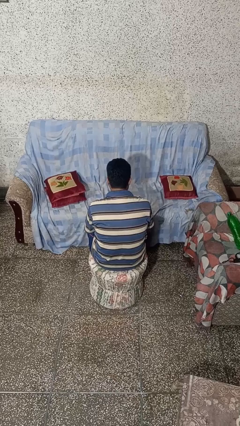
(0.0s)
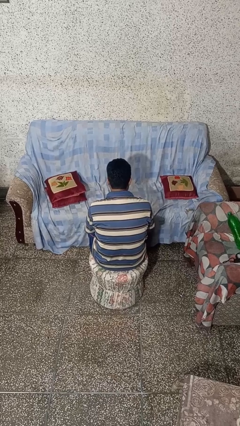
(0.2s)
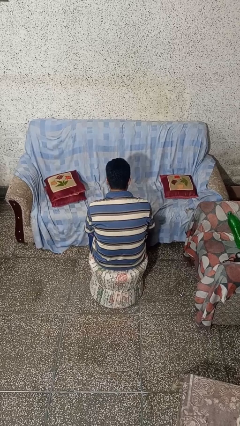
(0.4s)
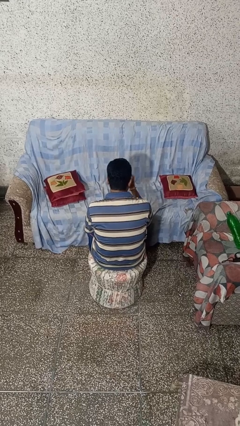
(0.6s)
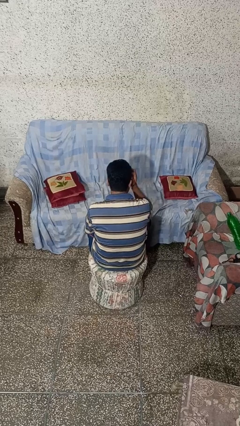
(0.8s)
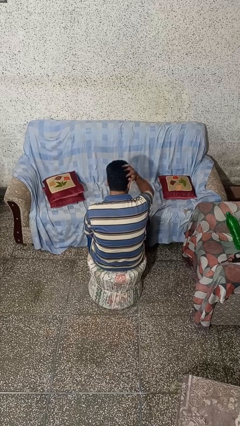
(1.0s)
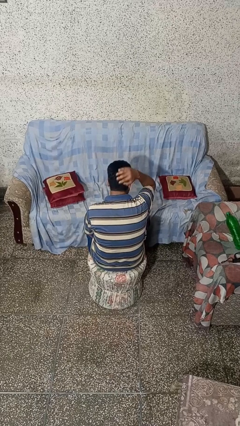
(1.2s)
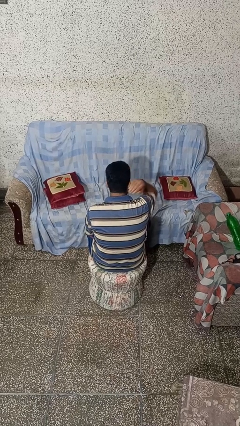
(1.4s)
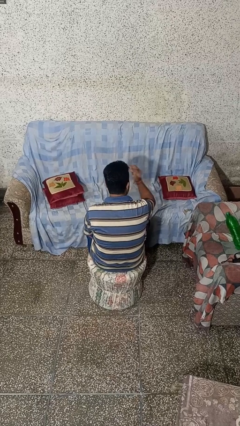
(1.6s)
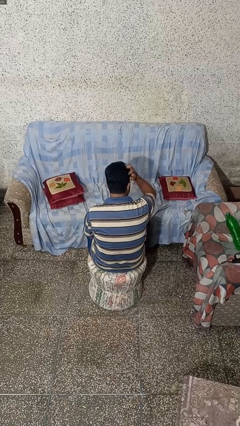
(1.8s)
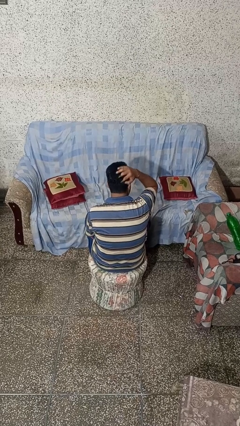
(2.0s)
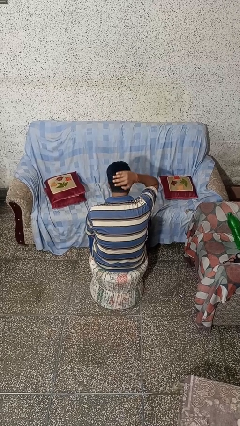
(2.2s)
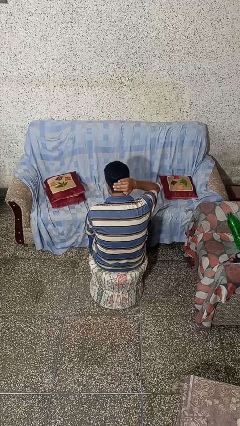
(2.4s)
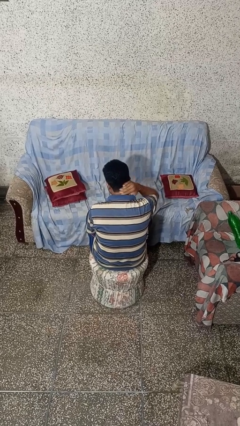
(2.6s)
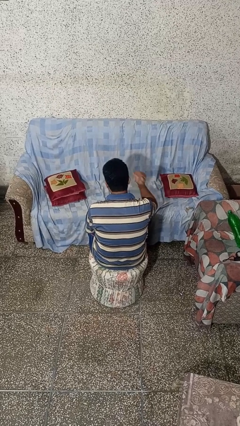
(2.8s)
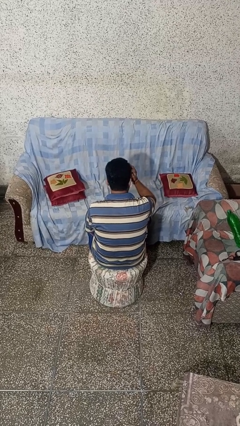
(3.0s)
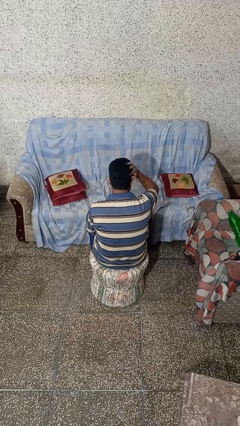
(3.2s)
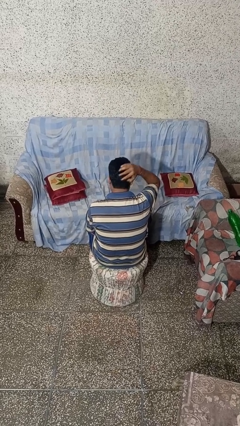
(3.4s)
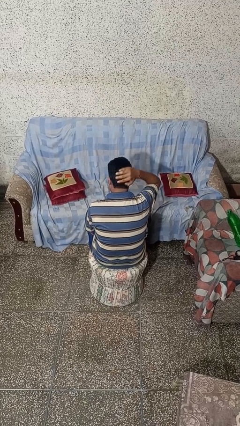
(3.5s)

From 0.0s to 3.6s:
person strokes hair

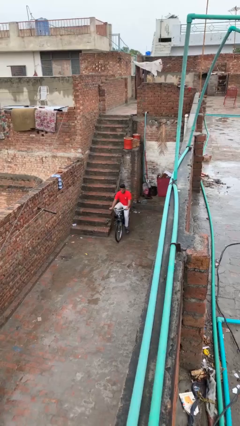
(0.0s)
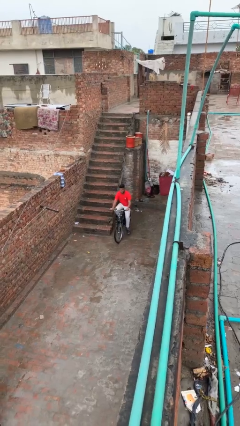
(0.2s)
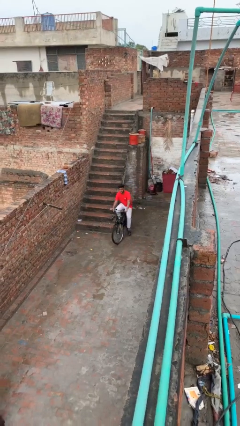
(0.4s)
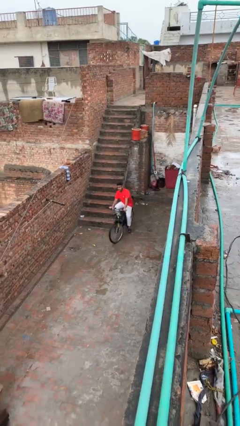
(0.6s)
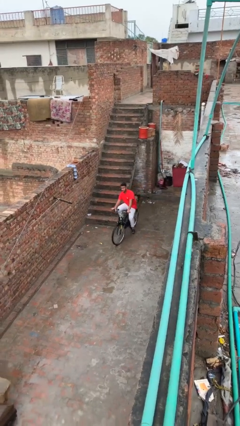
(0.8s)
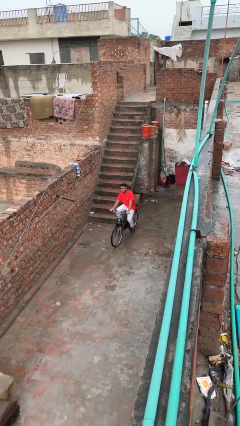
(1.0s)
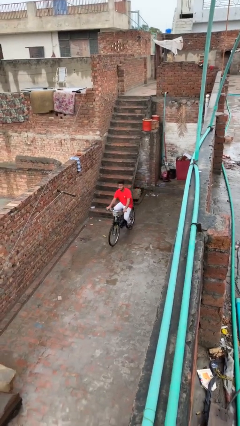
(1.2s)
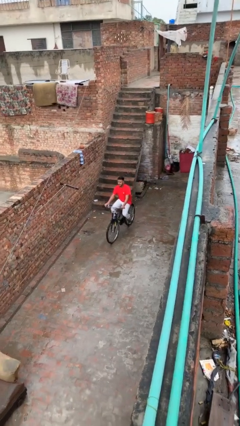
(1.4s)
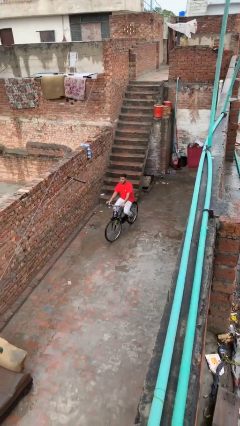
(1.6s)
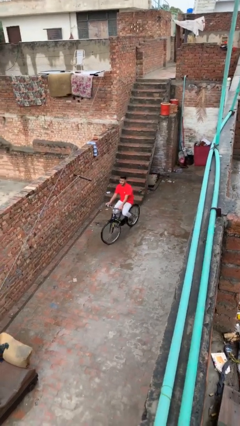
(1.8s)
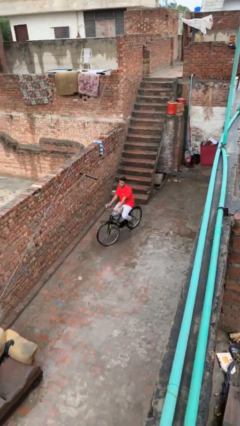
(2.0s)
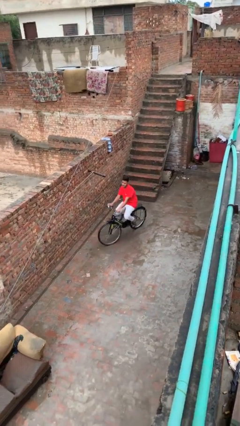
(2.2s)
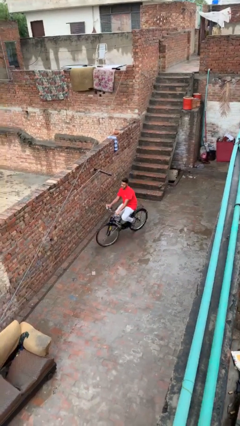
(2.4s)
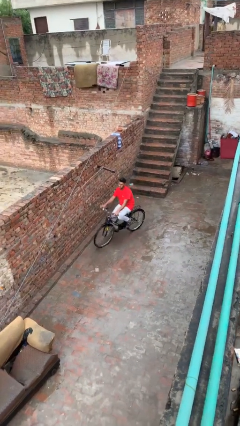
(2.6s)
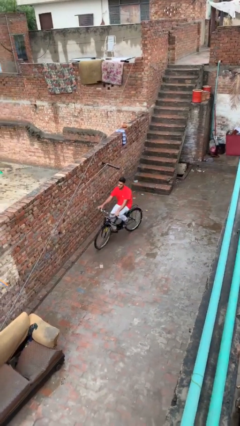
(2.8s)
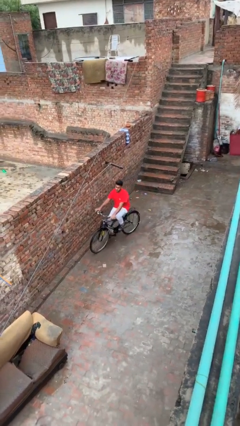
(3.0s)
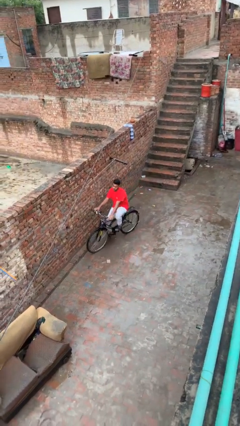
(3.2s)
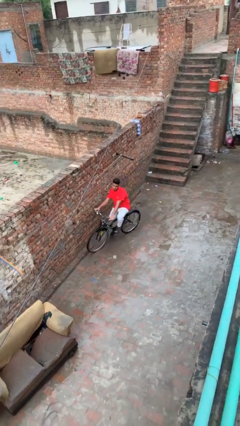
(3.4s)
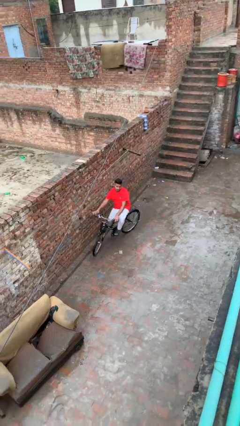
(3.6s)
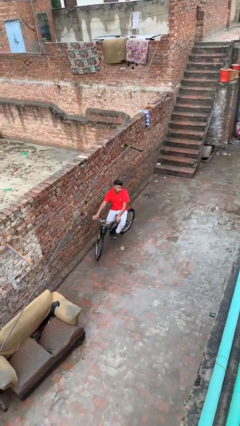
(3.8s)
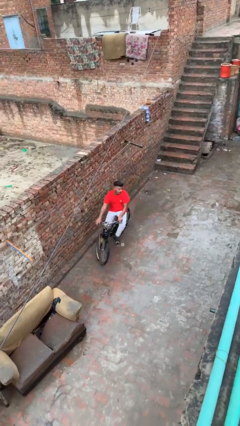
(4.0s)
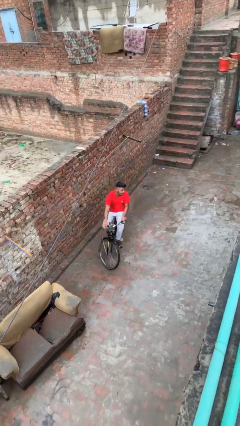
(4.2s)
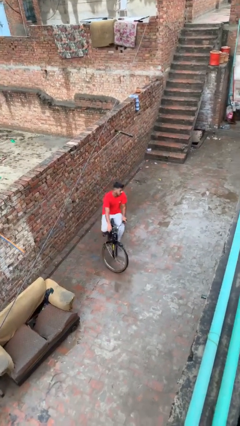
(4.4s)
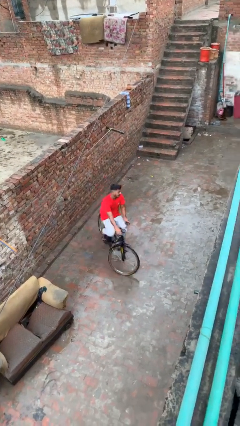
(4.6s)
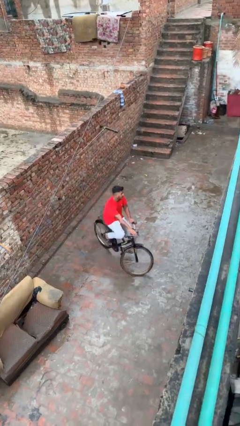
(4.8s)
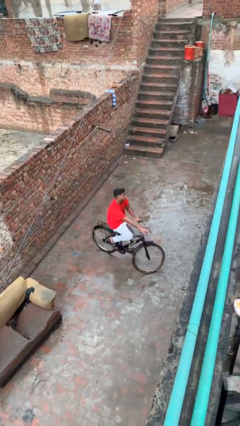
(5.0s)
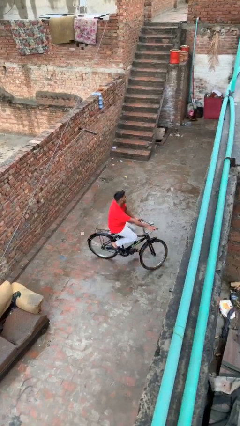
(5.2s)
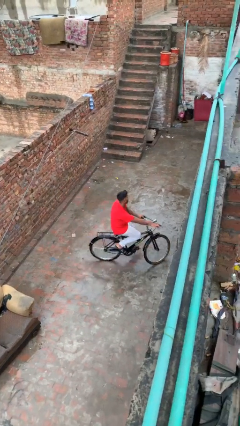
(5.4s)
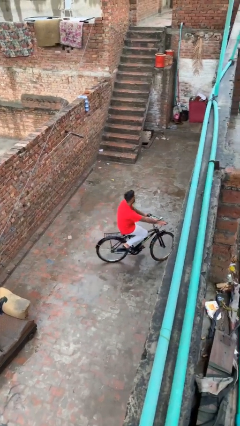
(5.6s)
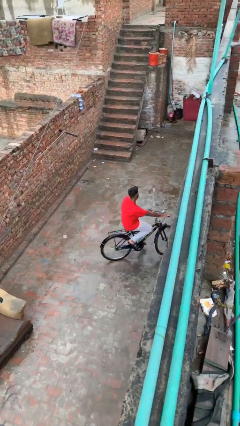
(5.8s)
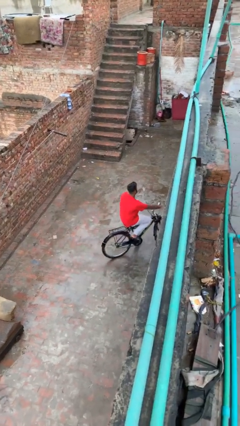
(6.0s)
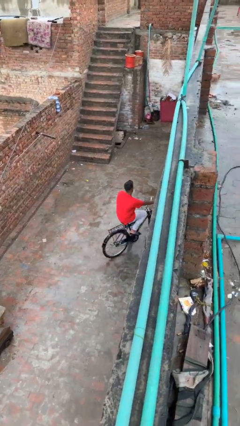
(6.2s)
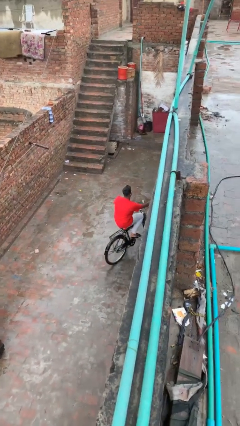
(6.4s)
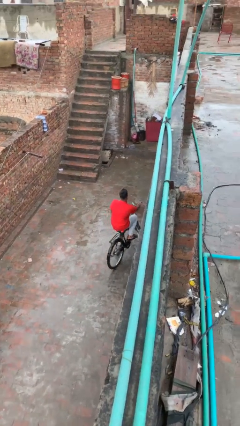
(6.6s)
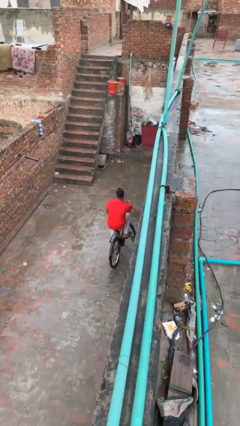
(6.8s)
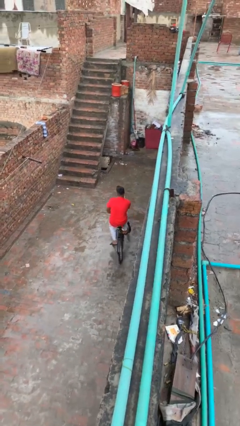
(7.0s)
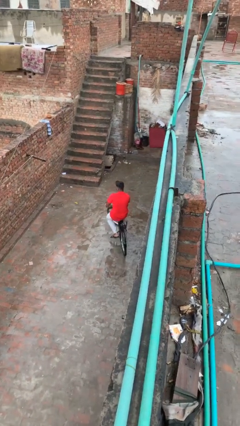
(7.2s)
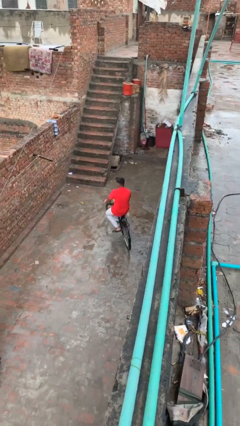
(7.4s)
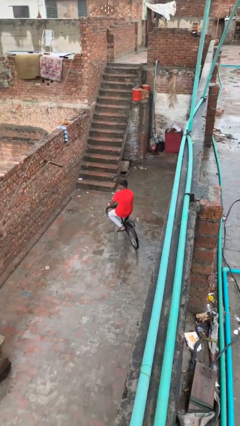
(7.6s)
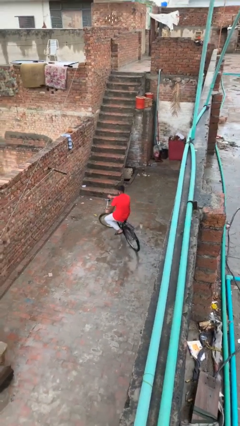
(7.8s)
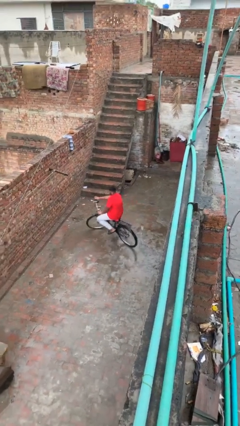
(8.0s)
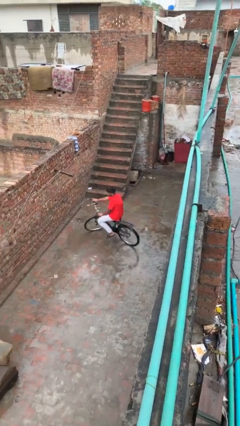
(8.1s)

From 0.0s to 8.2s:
person rides bicycle

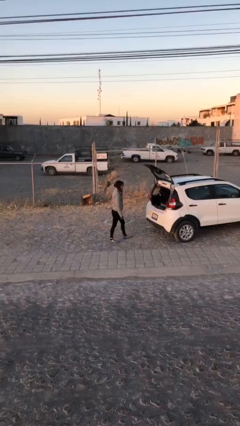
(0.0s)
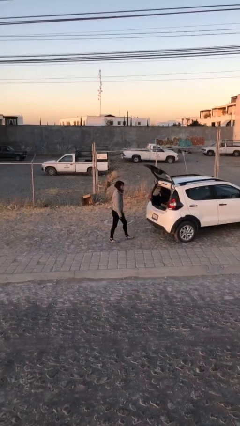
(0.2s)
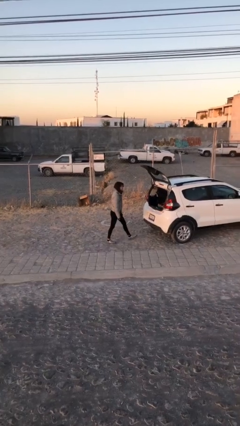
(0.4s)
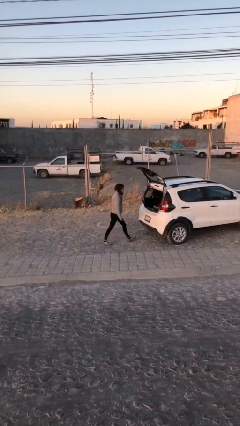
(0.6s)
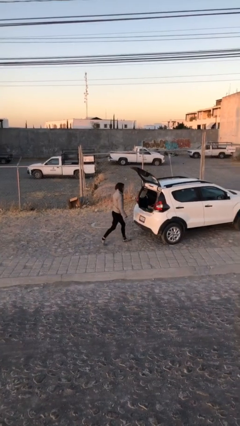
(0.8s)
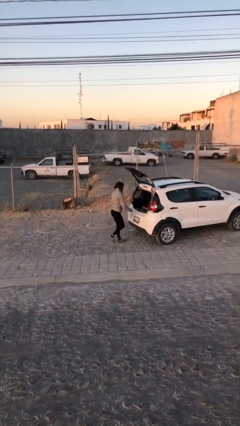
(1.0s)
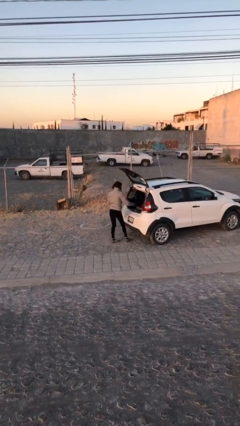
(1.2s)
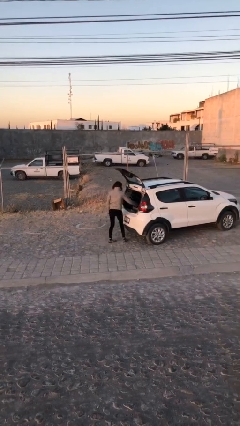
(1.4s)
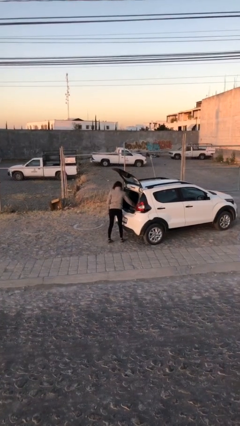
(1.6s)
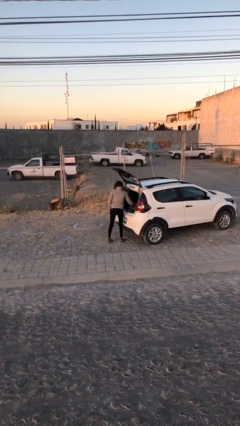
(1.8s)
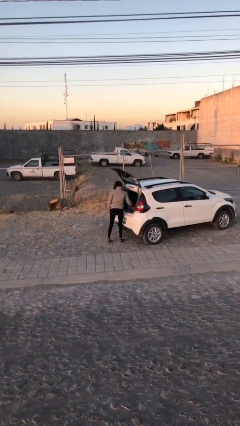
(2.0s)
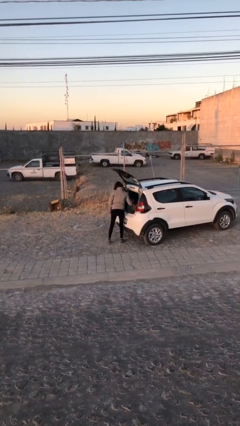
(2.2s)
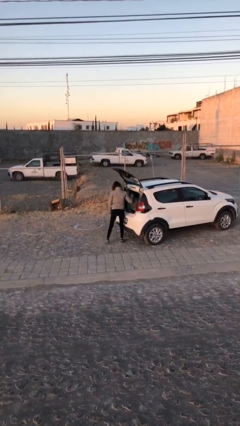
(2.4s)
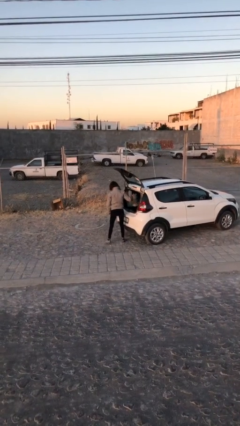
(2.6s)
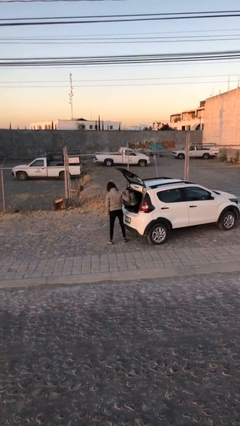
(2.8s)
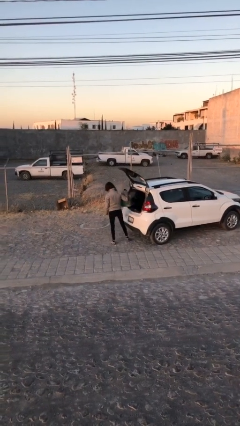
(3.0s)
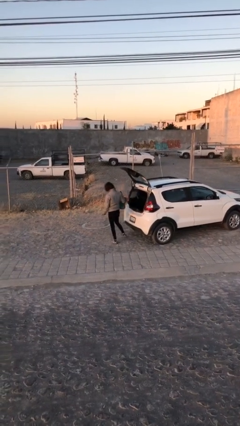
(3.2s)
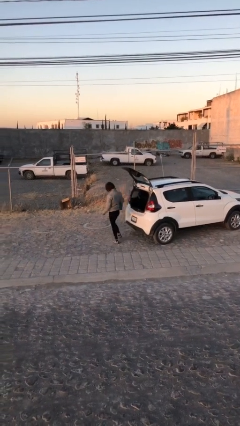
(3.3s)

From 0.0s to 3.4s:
person unloads car

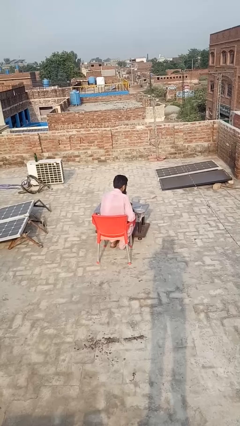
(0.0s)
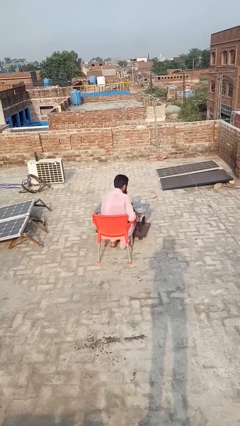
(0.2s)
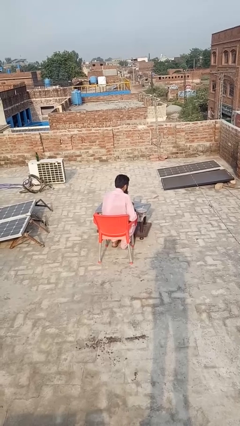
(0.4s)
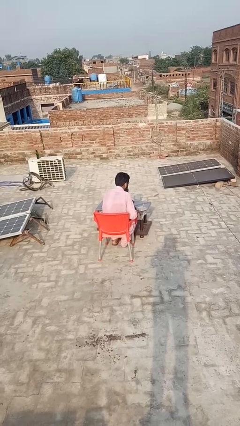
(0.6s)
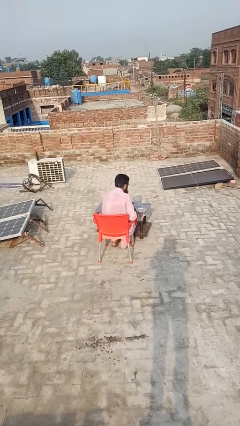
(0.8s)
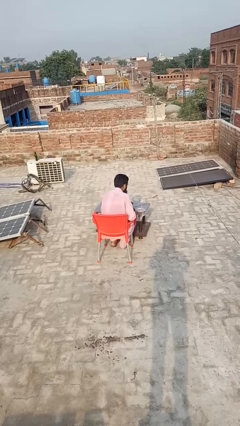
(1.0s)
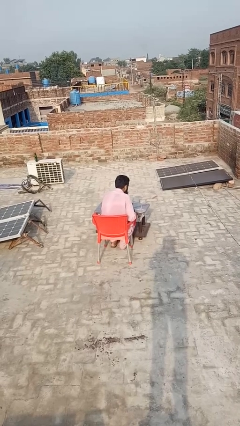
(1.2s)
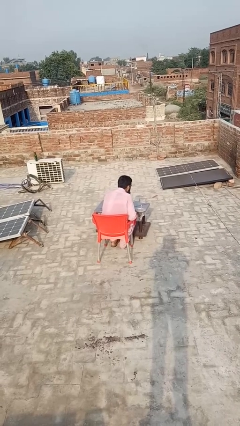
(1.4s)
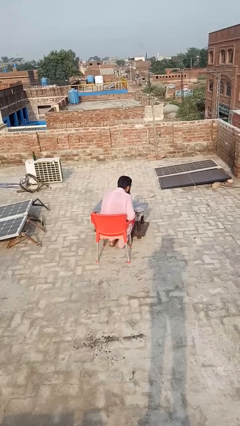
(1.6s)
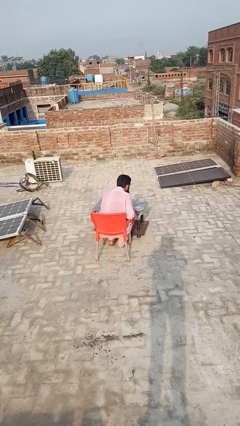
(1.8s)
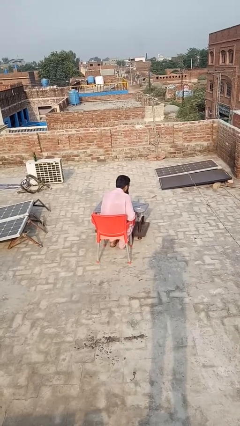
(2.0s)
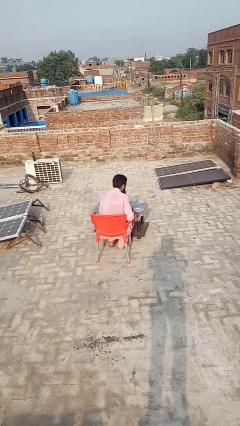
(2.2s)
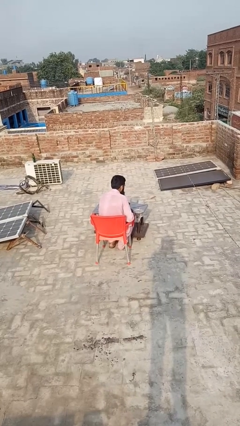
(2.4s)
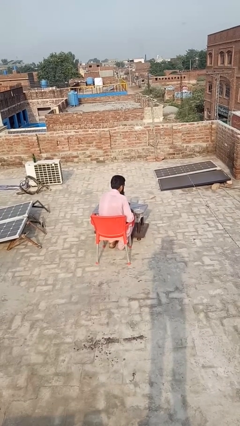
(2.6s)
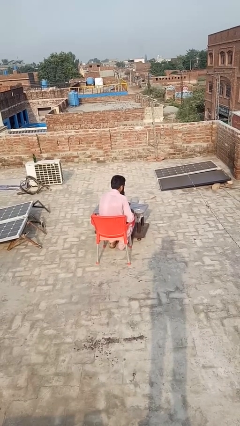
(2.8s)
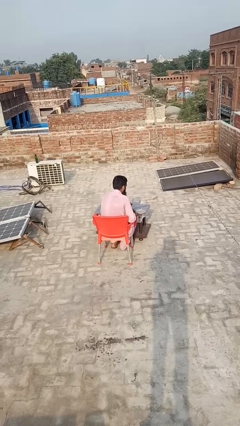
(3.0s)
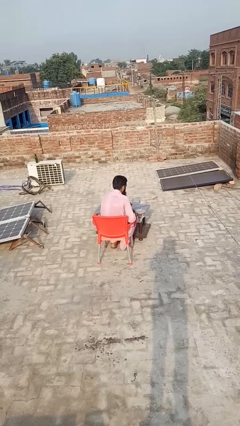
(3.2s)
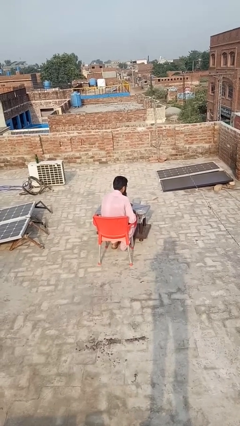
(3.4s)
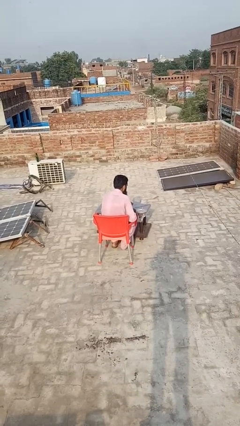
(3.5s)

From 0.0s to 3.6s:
person extinguishes candle
